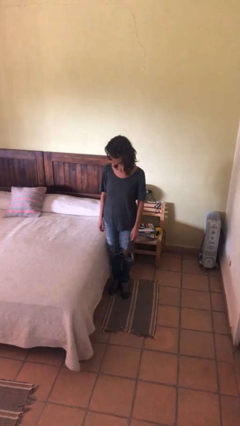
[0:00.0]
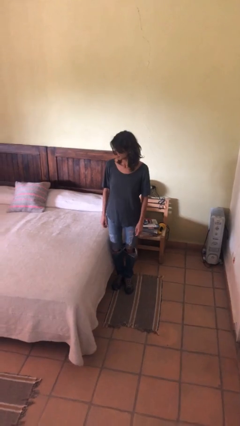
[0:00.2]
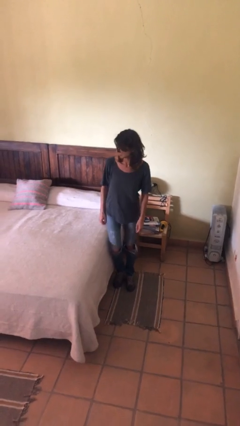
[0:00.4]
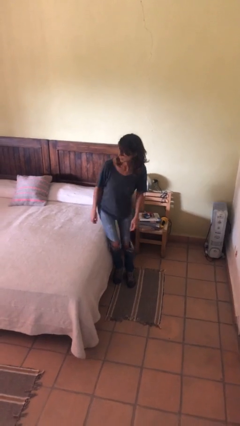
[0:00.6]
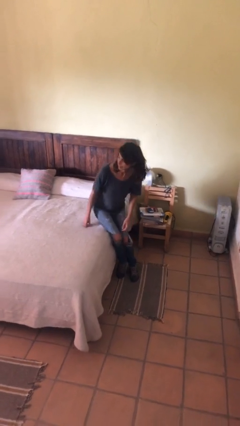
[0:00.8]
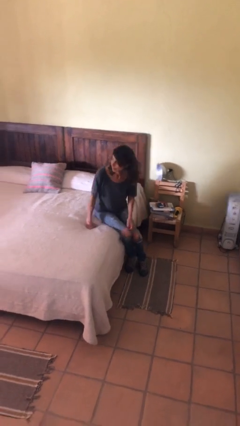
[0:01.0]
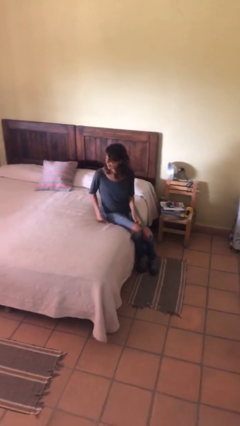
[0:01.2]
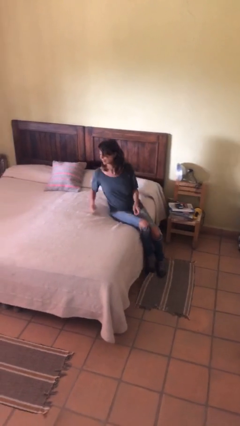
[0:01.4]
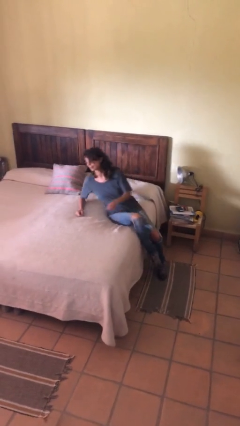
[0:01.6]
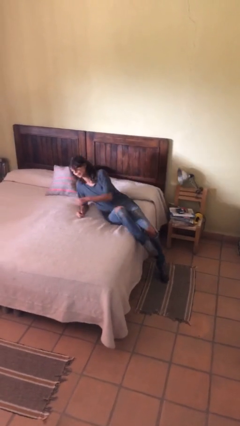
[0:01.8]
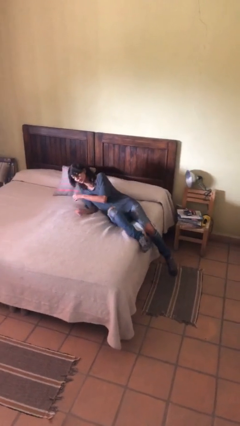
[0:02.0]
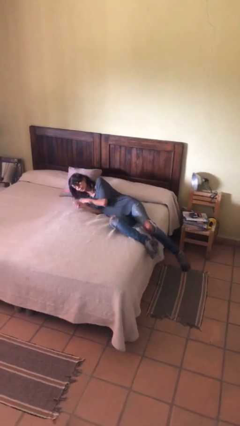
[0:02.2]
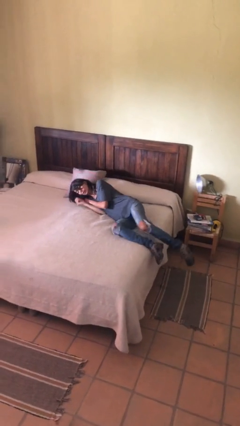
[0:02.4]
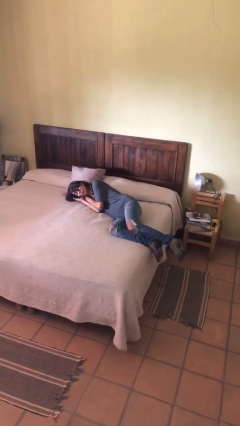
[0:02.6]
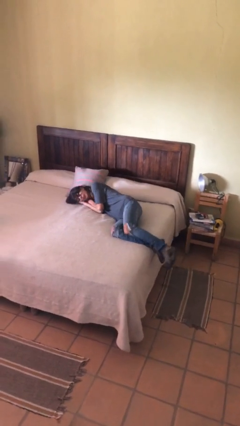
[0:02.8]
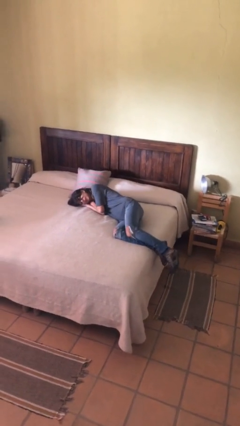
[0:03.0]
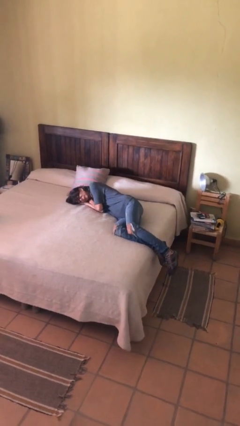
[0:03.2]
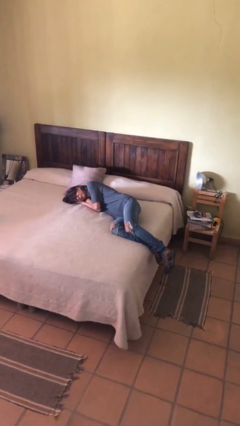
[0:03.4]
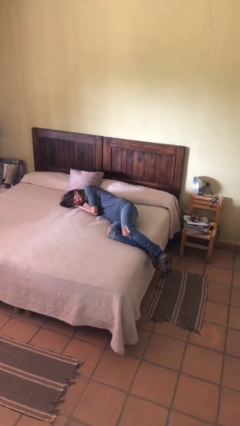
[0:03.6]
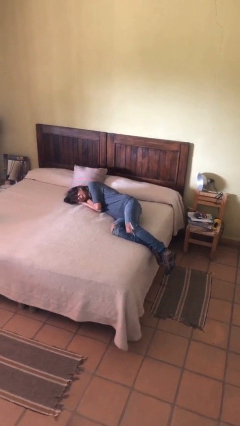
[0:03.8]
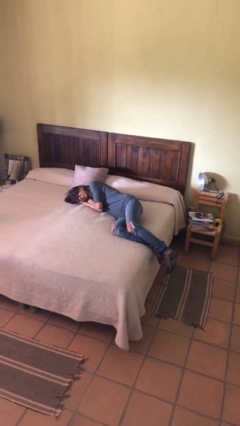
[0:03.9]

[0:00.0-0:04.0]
person lies down on bed

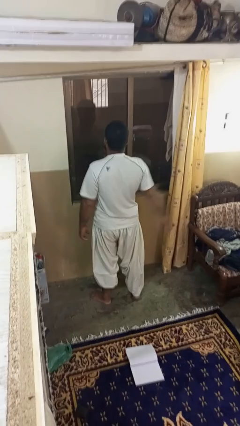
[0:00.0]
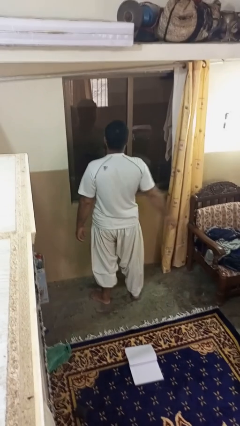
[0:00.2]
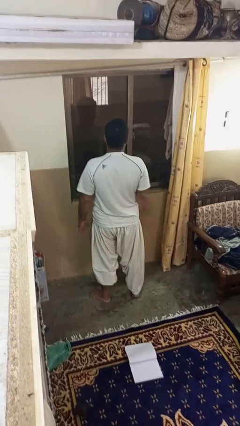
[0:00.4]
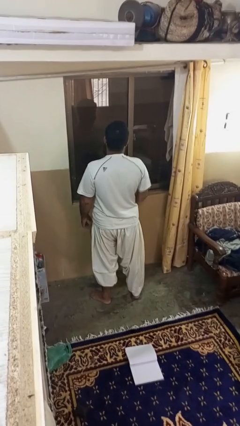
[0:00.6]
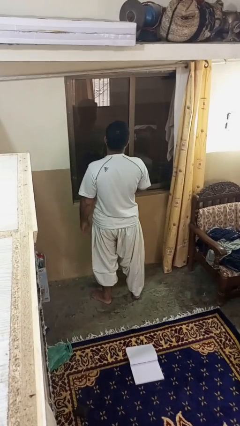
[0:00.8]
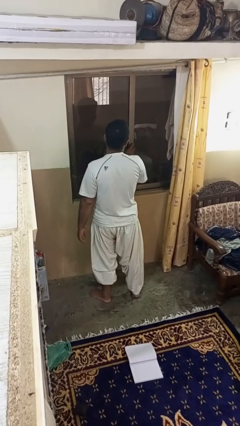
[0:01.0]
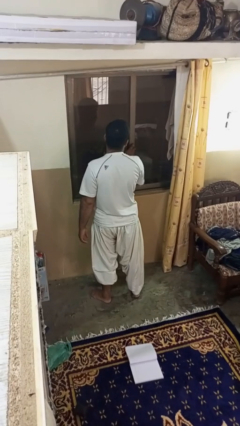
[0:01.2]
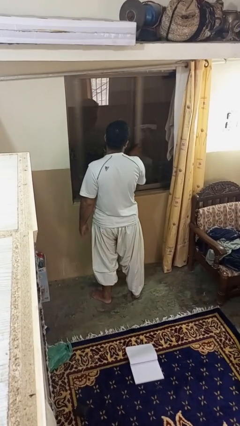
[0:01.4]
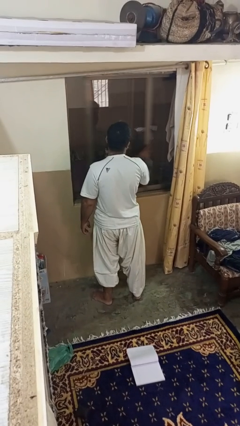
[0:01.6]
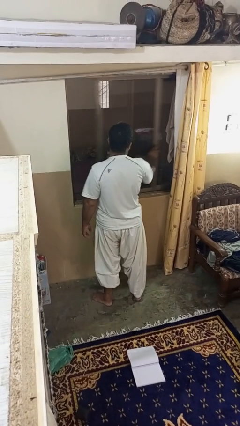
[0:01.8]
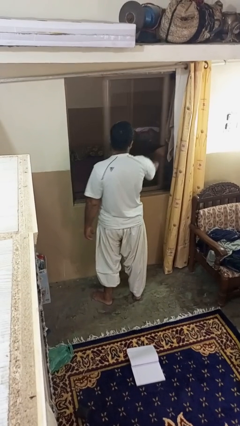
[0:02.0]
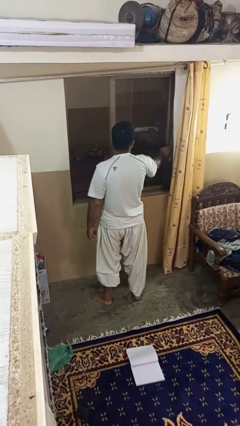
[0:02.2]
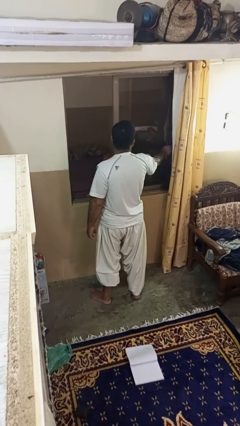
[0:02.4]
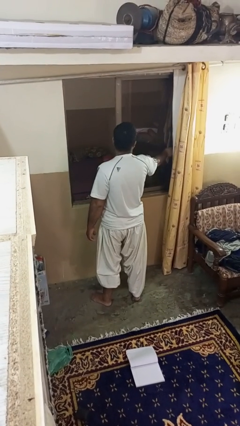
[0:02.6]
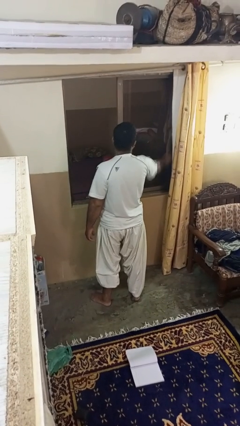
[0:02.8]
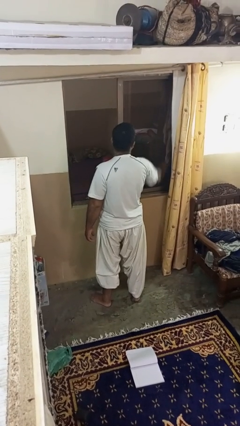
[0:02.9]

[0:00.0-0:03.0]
person opens home window

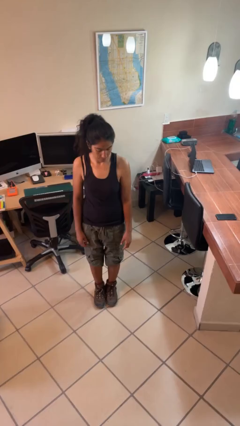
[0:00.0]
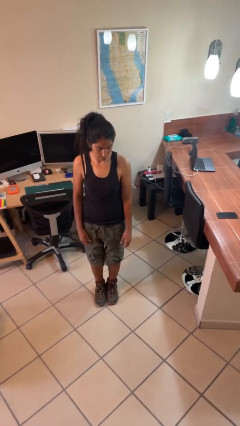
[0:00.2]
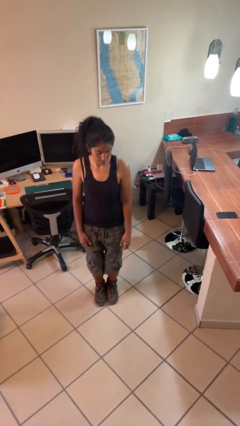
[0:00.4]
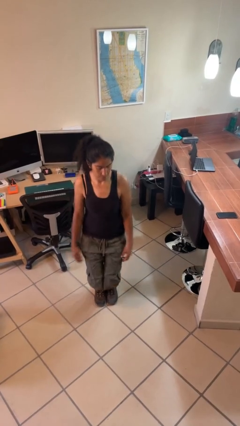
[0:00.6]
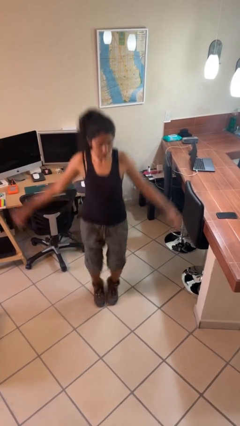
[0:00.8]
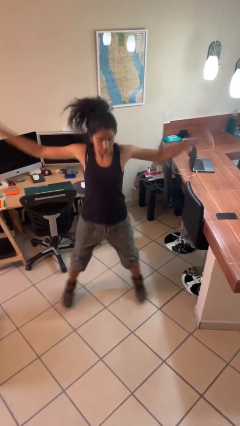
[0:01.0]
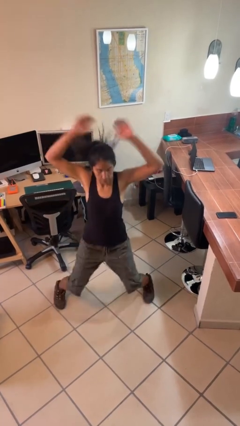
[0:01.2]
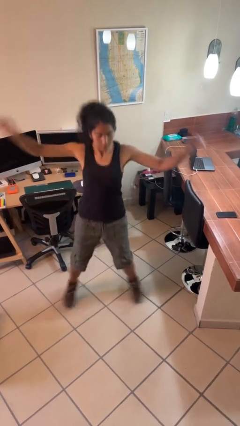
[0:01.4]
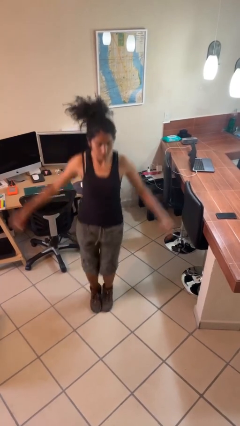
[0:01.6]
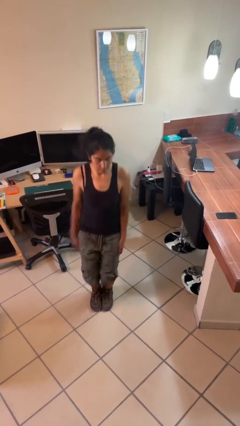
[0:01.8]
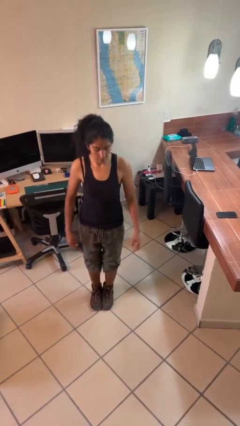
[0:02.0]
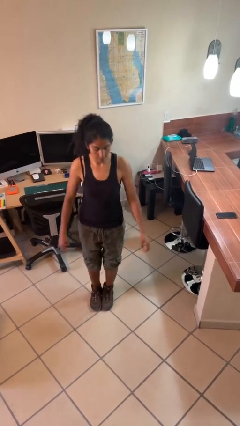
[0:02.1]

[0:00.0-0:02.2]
person exercises with jumping jacks

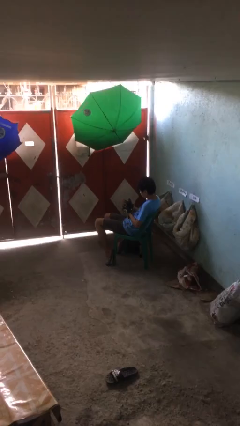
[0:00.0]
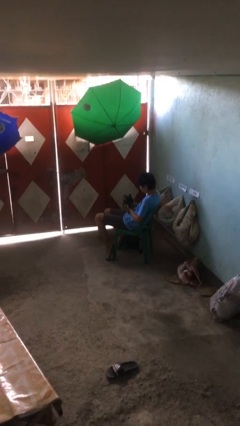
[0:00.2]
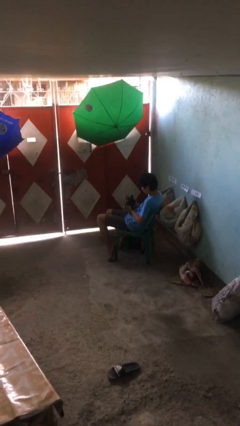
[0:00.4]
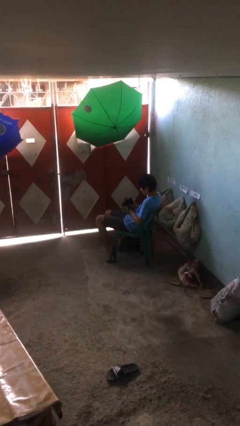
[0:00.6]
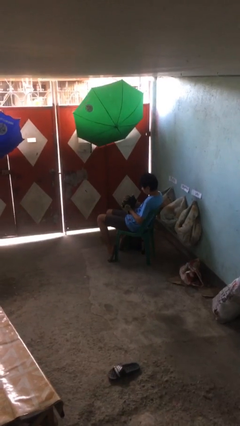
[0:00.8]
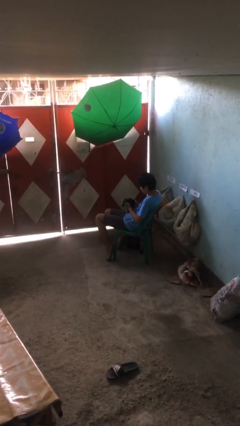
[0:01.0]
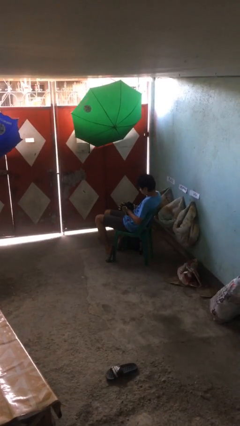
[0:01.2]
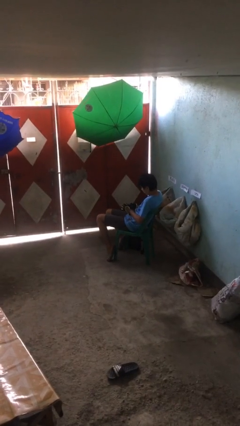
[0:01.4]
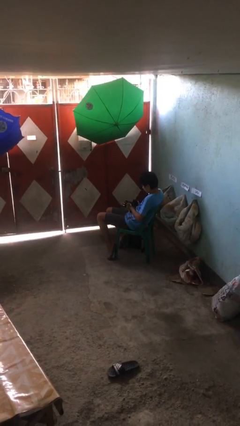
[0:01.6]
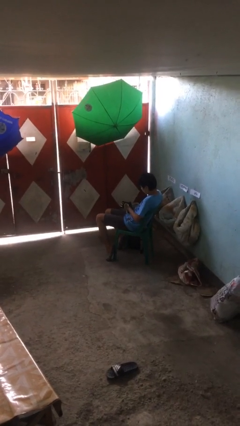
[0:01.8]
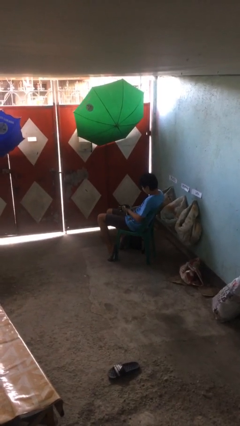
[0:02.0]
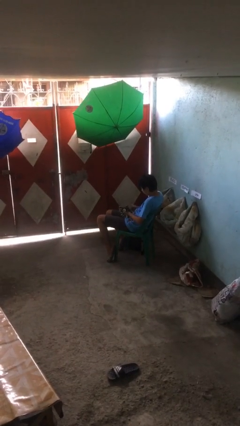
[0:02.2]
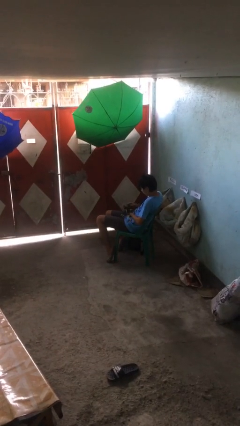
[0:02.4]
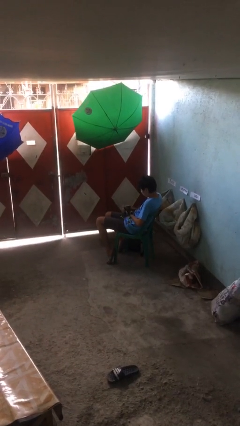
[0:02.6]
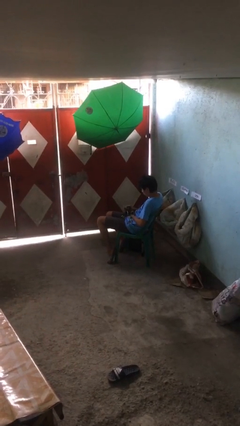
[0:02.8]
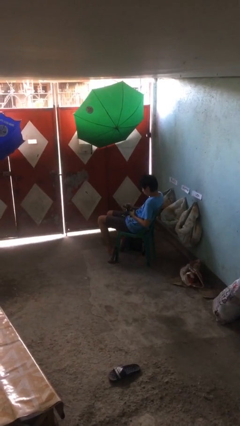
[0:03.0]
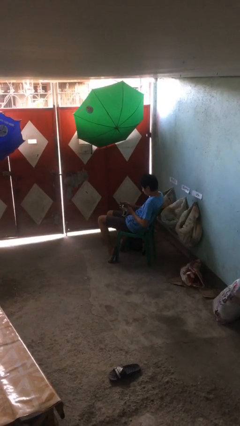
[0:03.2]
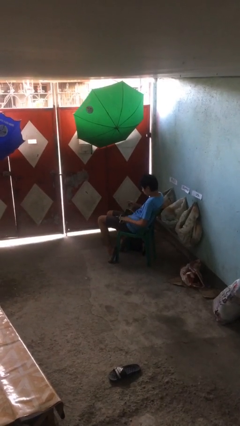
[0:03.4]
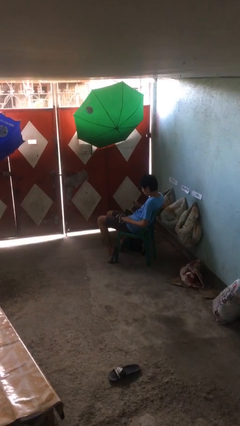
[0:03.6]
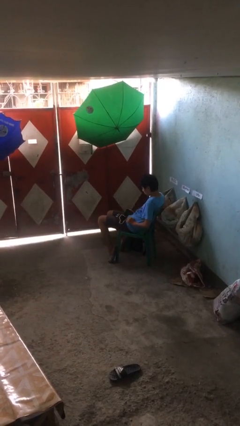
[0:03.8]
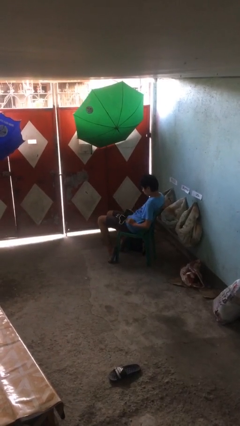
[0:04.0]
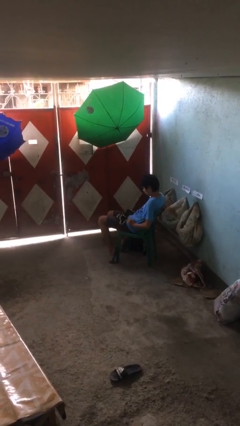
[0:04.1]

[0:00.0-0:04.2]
person takes off gloves

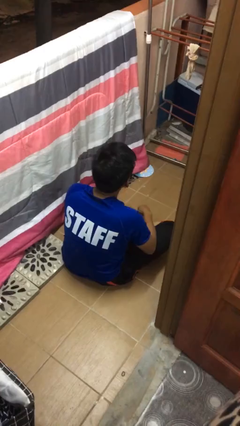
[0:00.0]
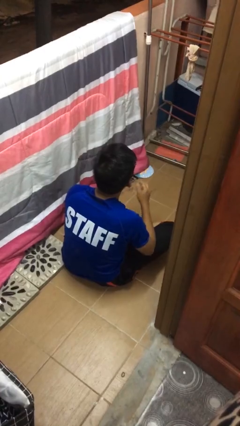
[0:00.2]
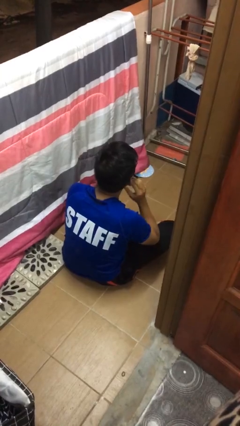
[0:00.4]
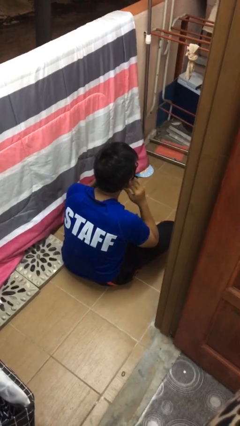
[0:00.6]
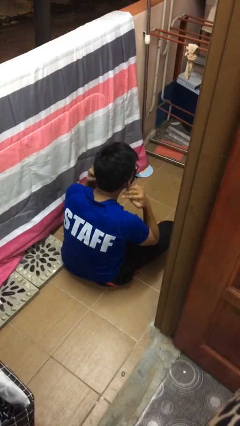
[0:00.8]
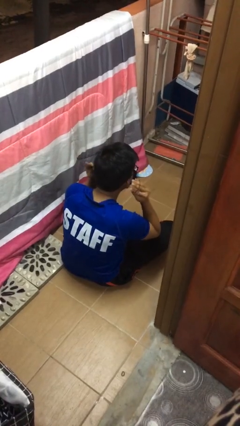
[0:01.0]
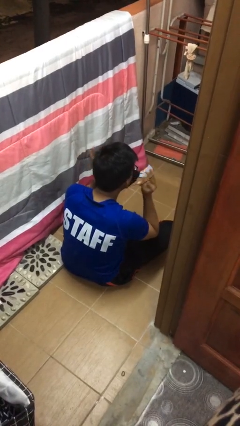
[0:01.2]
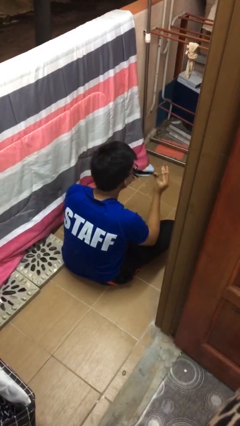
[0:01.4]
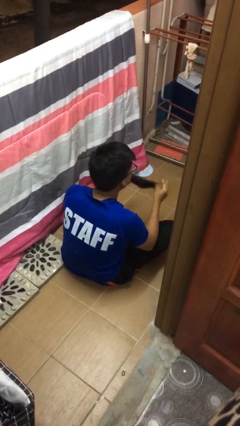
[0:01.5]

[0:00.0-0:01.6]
person takes off facemask

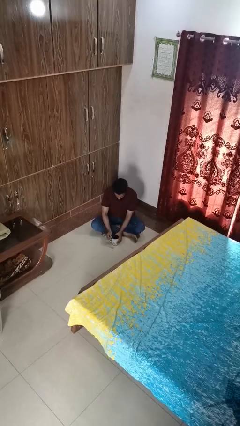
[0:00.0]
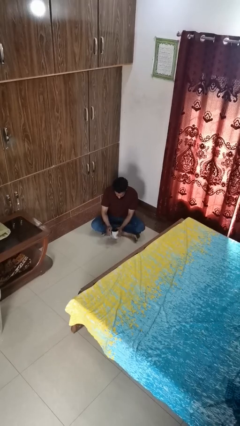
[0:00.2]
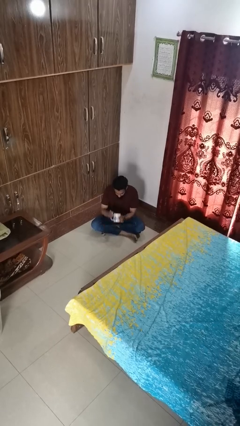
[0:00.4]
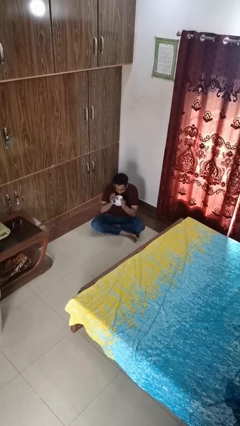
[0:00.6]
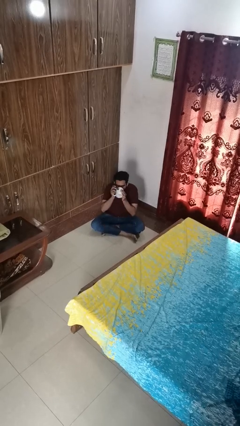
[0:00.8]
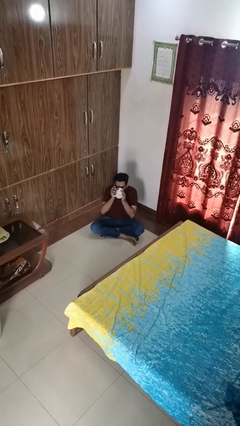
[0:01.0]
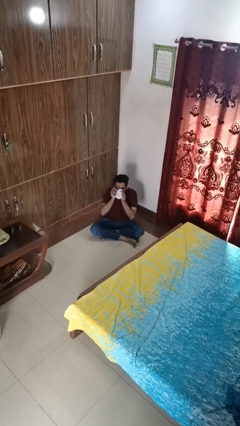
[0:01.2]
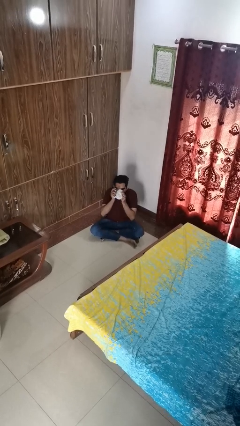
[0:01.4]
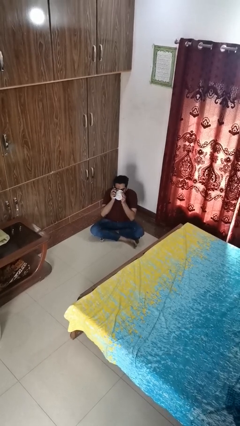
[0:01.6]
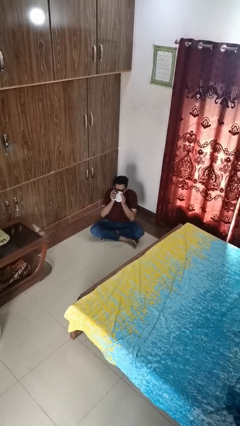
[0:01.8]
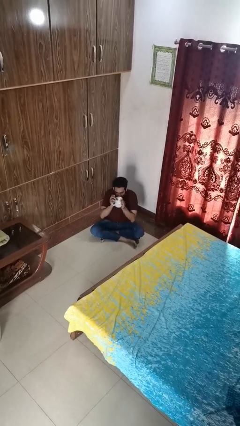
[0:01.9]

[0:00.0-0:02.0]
person drinks from mug

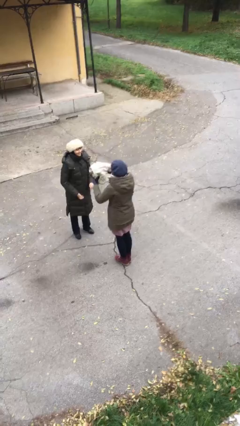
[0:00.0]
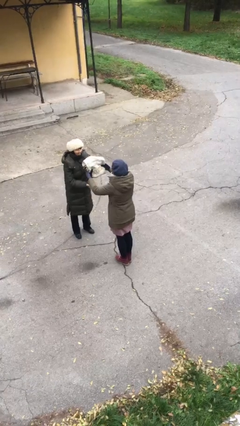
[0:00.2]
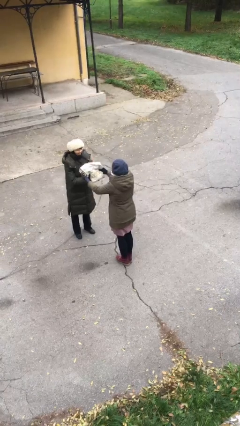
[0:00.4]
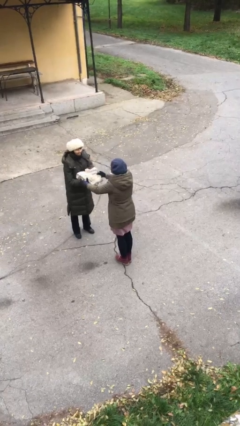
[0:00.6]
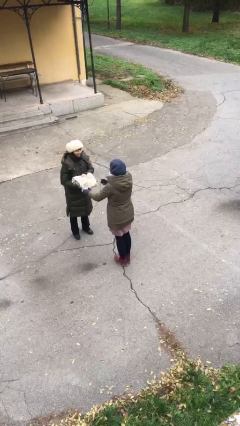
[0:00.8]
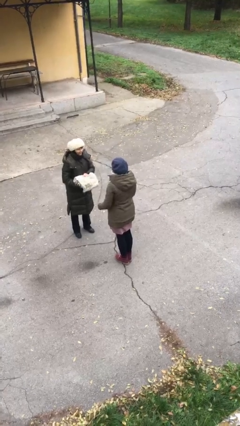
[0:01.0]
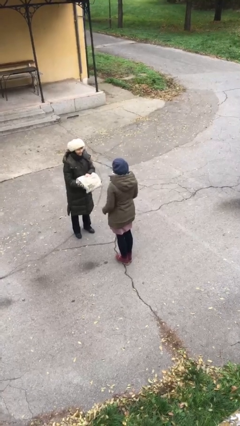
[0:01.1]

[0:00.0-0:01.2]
person transfers object to person
